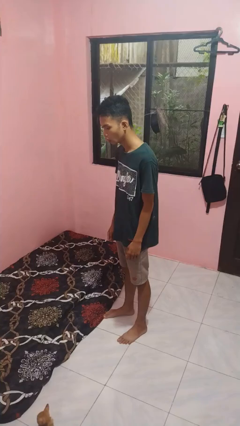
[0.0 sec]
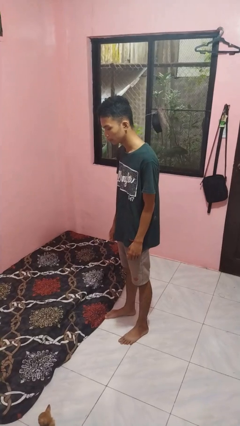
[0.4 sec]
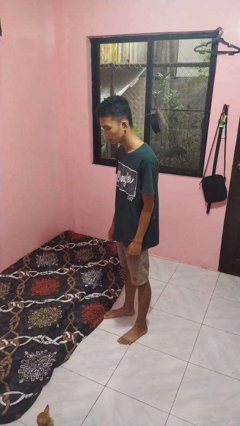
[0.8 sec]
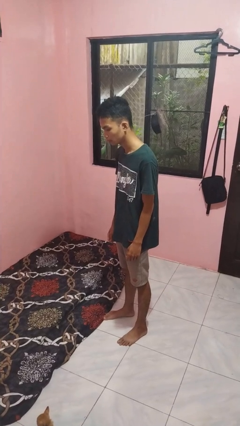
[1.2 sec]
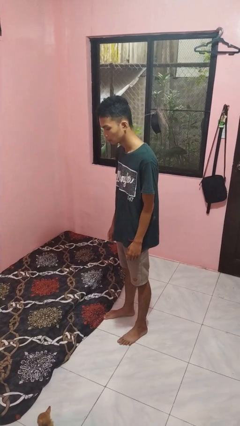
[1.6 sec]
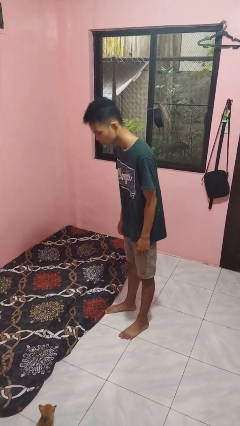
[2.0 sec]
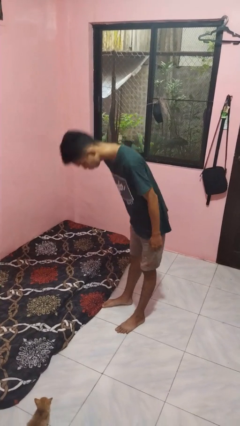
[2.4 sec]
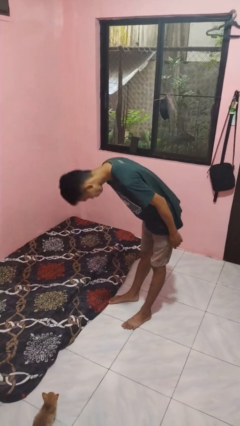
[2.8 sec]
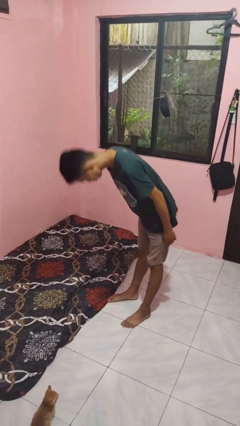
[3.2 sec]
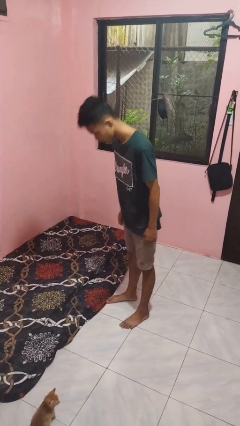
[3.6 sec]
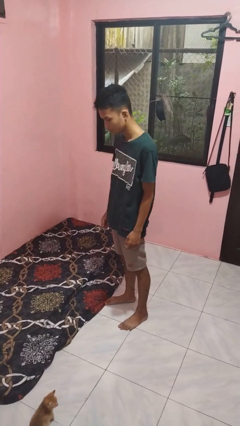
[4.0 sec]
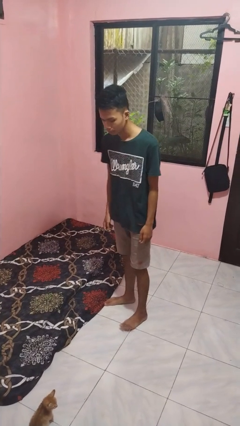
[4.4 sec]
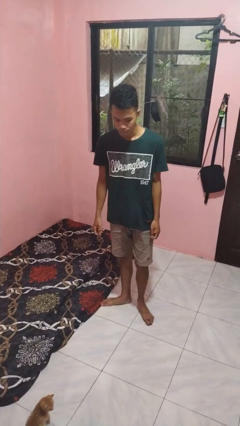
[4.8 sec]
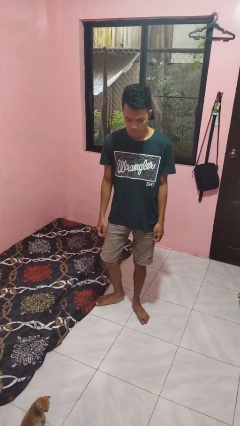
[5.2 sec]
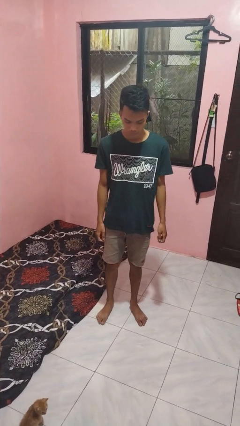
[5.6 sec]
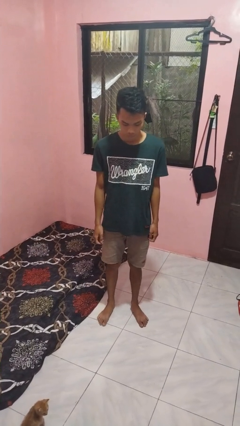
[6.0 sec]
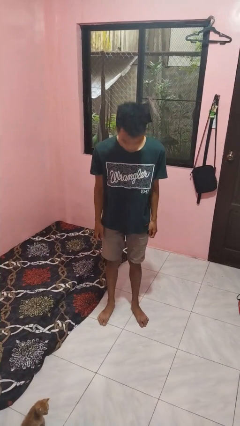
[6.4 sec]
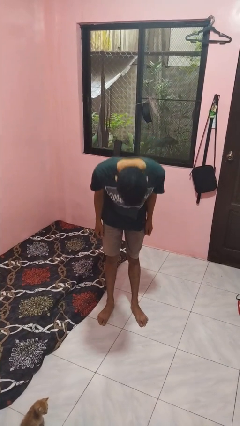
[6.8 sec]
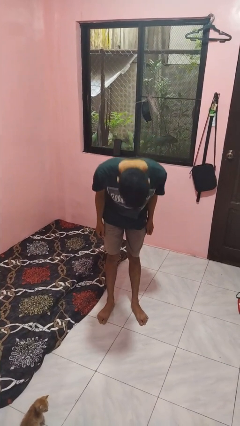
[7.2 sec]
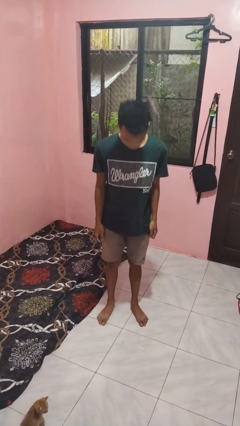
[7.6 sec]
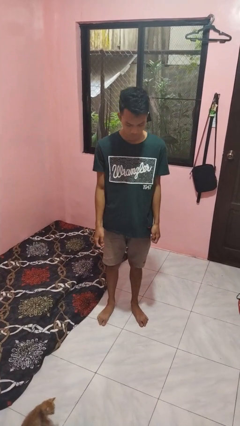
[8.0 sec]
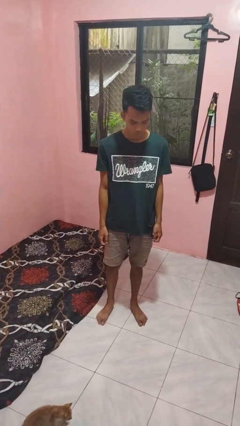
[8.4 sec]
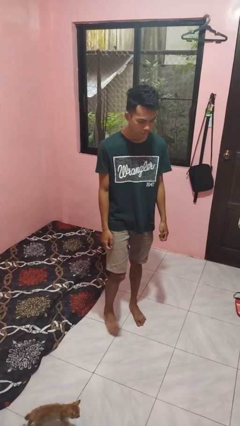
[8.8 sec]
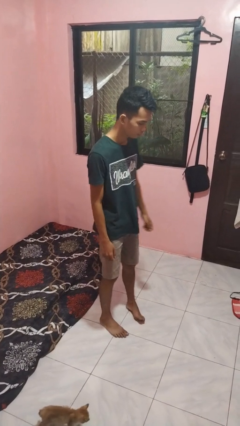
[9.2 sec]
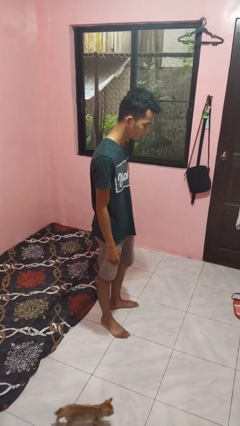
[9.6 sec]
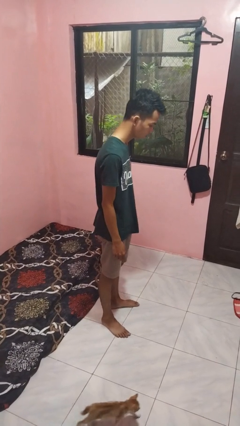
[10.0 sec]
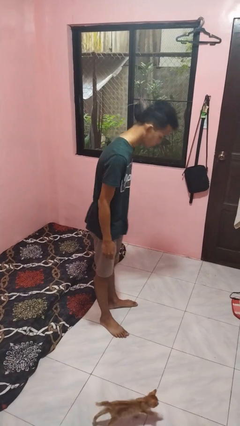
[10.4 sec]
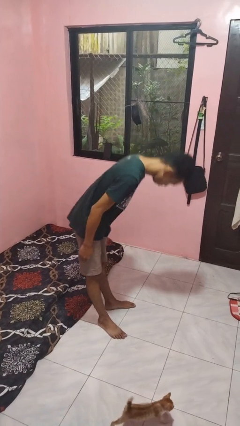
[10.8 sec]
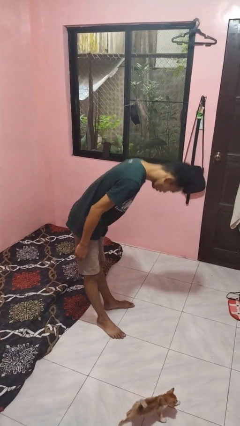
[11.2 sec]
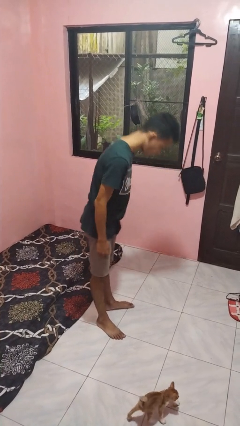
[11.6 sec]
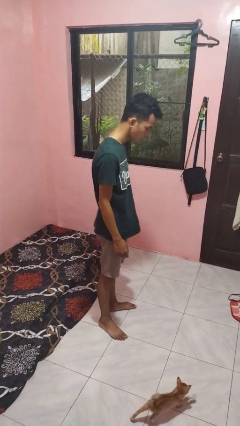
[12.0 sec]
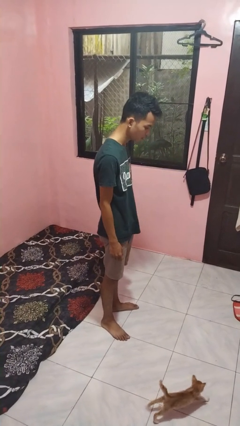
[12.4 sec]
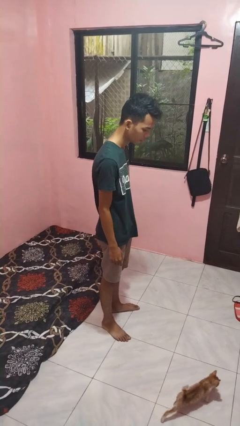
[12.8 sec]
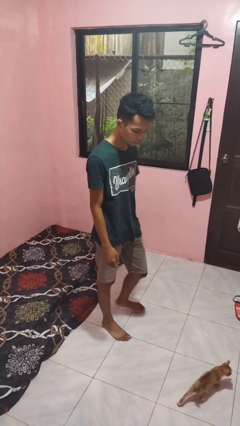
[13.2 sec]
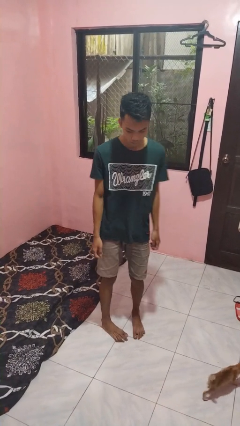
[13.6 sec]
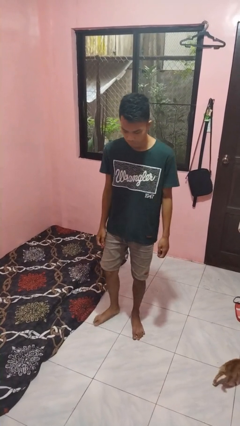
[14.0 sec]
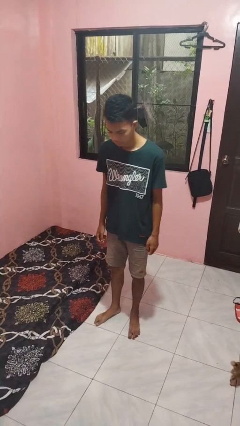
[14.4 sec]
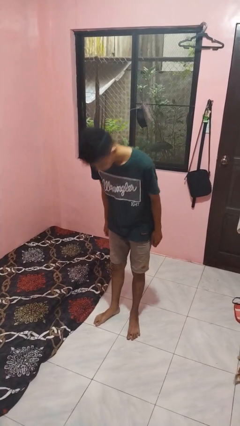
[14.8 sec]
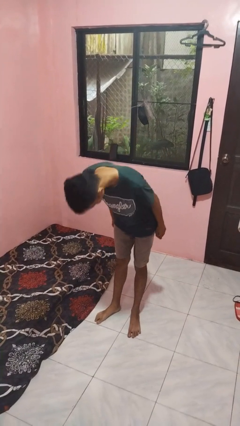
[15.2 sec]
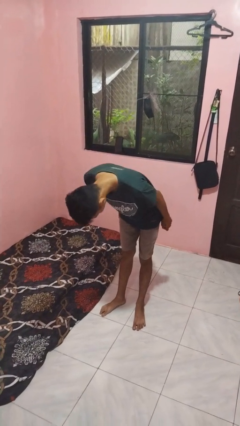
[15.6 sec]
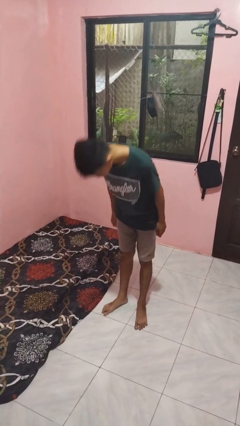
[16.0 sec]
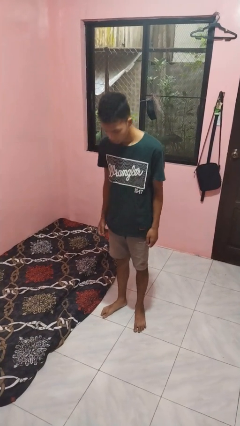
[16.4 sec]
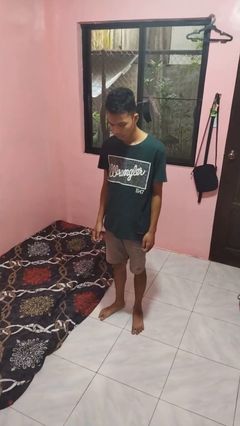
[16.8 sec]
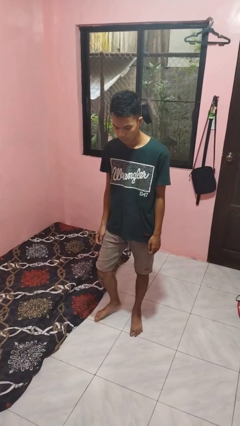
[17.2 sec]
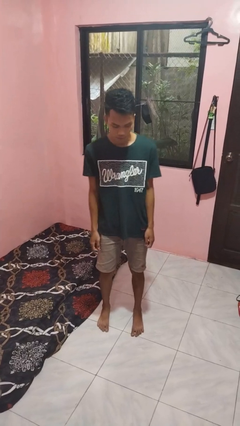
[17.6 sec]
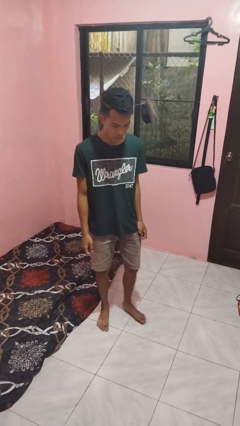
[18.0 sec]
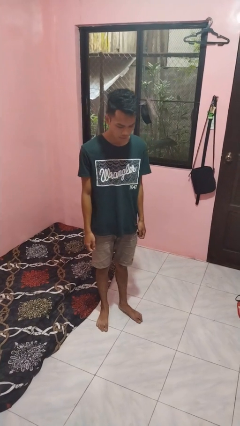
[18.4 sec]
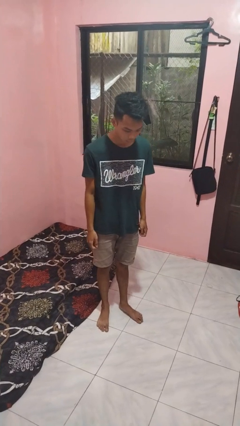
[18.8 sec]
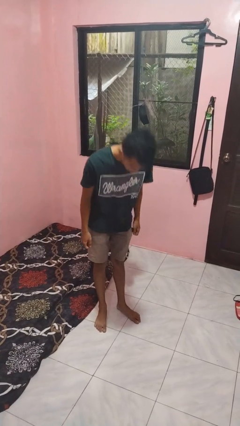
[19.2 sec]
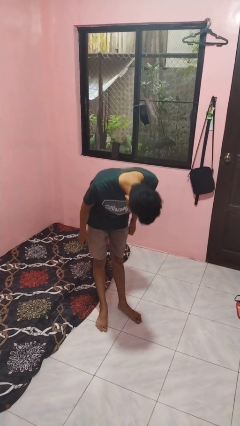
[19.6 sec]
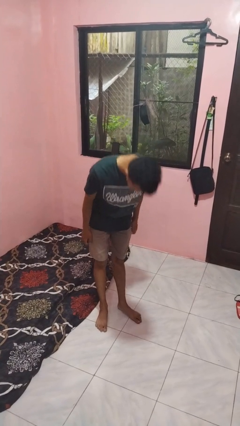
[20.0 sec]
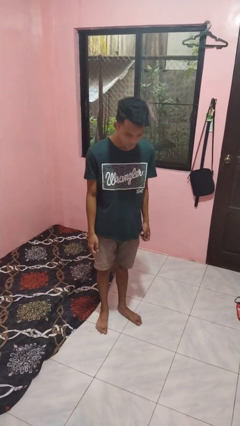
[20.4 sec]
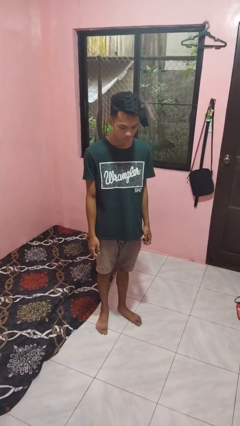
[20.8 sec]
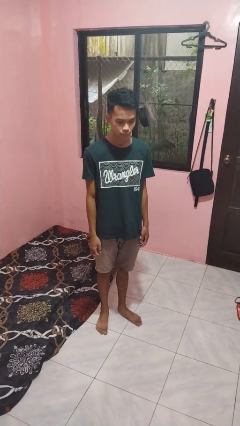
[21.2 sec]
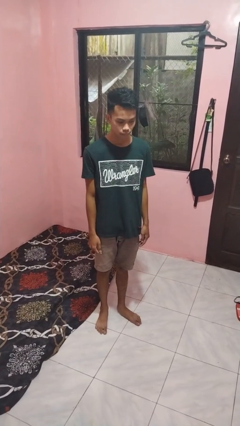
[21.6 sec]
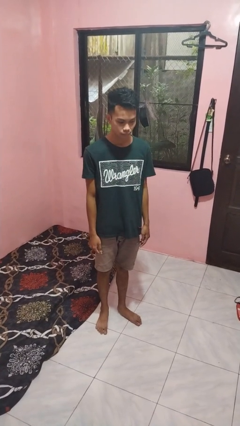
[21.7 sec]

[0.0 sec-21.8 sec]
person bows

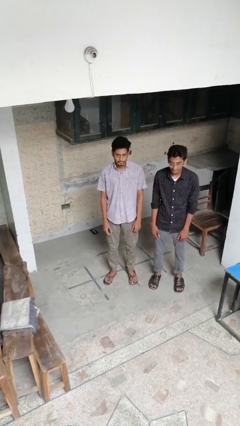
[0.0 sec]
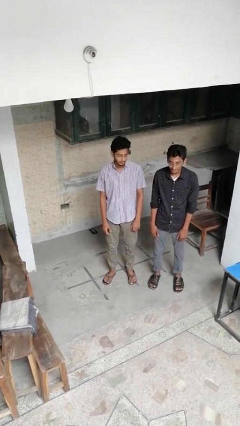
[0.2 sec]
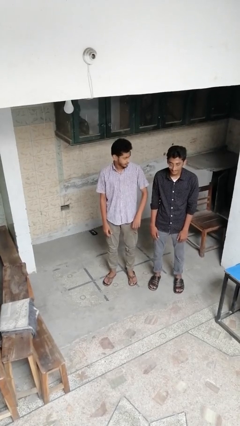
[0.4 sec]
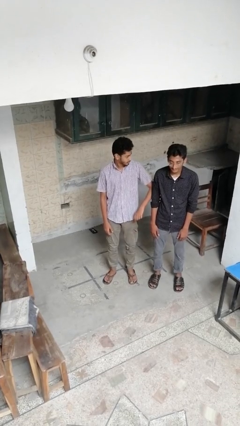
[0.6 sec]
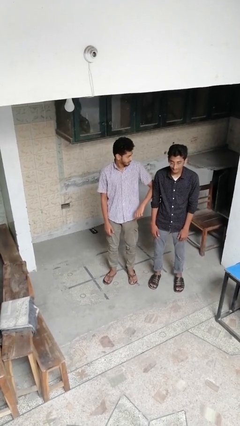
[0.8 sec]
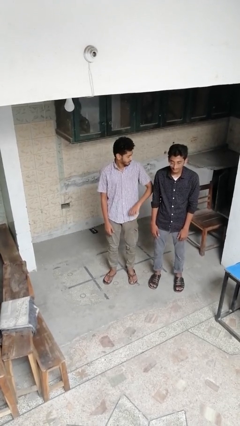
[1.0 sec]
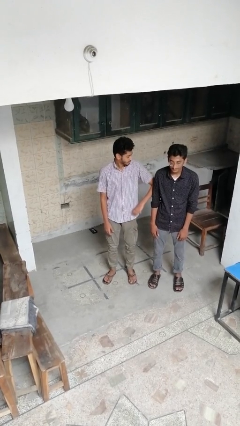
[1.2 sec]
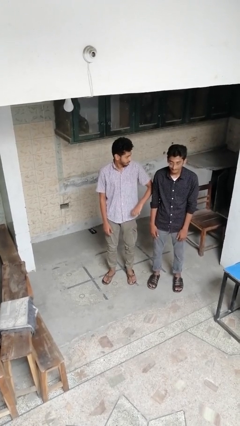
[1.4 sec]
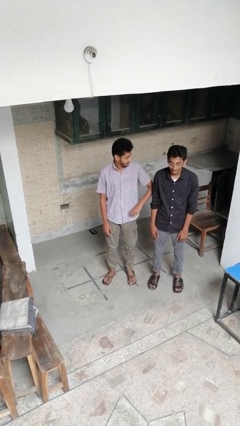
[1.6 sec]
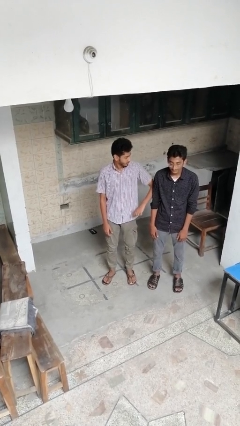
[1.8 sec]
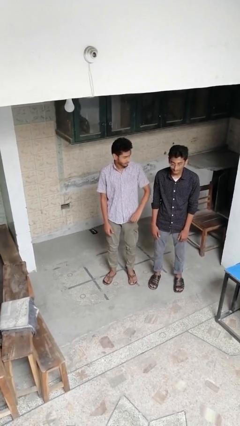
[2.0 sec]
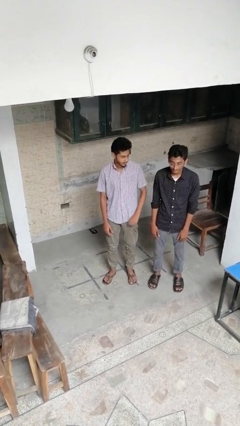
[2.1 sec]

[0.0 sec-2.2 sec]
person nudges person with elbow

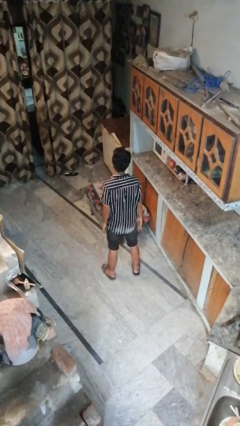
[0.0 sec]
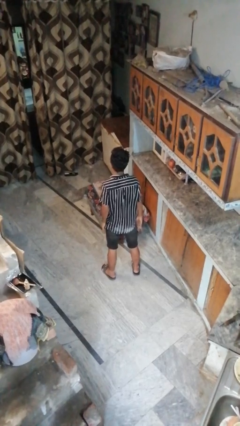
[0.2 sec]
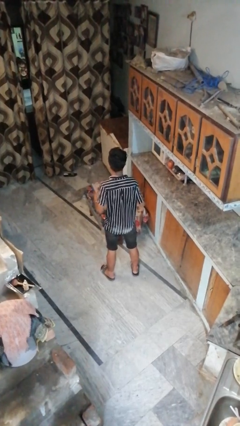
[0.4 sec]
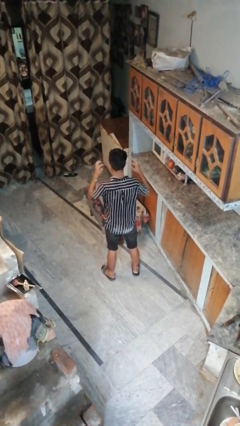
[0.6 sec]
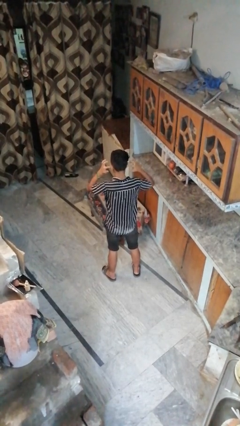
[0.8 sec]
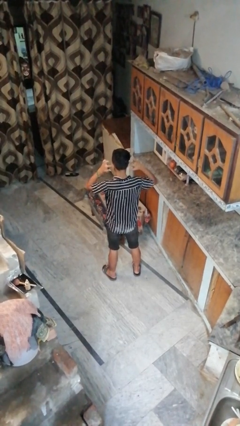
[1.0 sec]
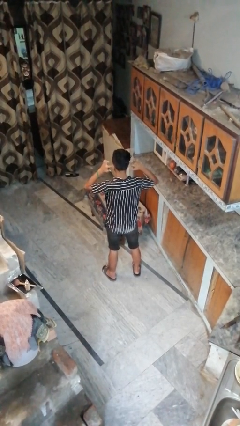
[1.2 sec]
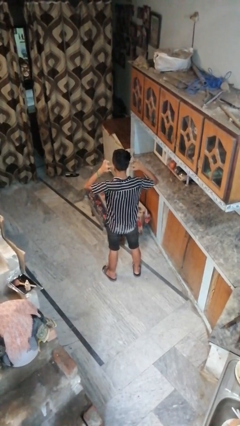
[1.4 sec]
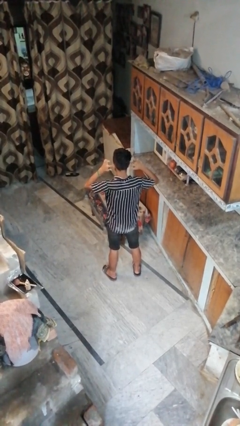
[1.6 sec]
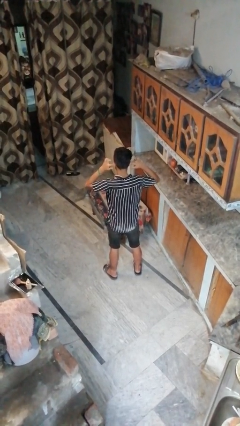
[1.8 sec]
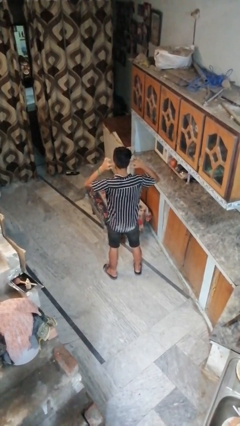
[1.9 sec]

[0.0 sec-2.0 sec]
person puts fingers in ear

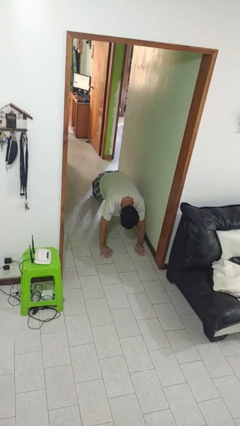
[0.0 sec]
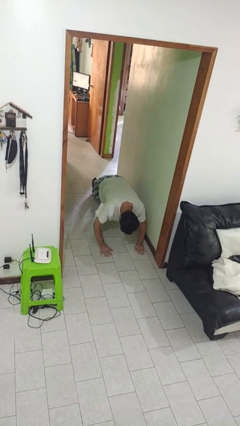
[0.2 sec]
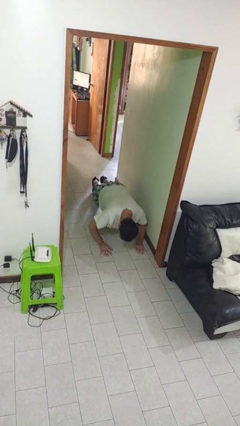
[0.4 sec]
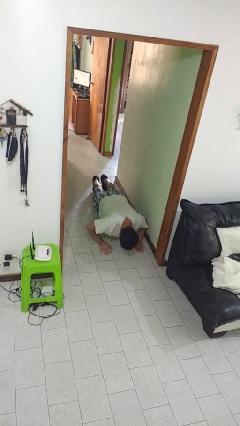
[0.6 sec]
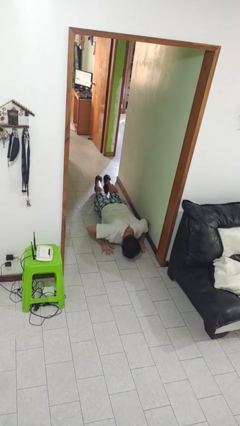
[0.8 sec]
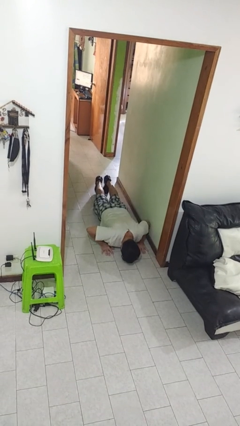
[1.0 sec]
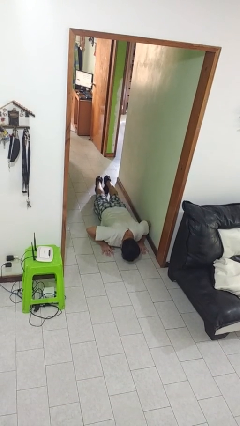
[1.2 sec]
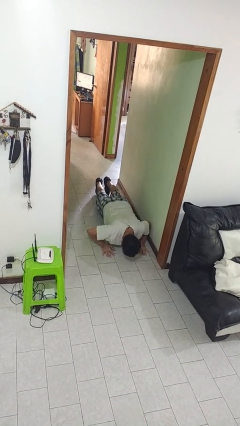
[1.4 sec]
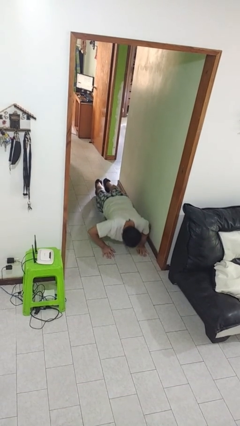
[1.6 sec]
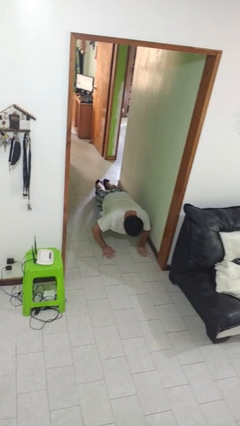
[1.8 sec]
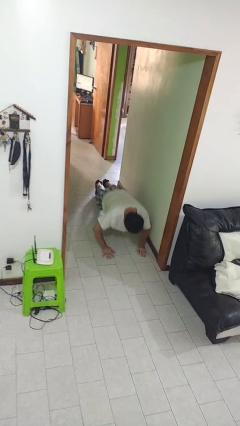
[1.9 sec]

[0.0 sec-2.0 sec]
person exercises with pushup

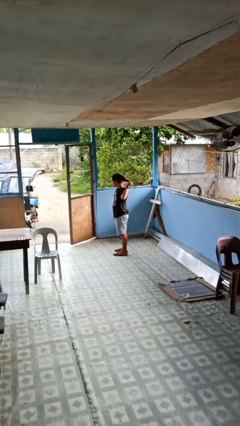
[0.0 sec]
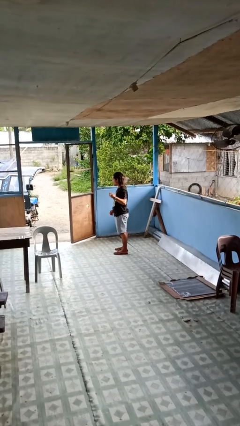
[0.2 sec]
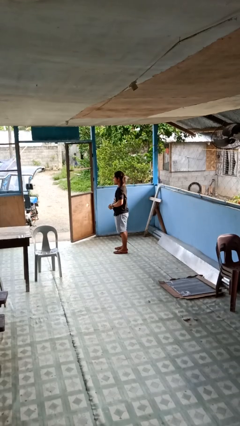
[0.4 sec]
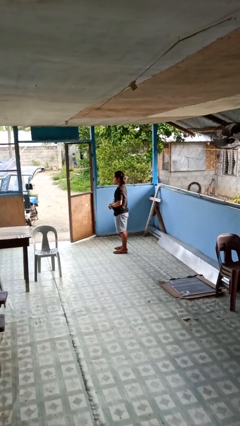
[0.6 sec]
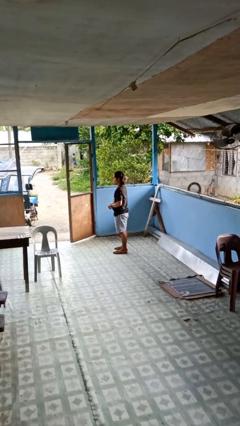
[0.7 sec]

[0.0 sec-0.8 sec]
person takes off hairtie
